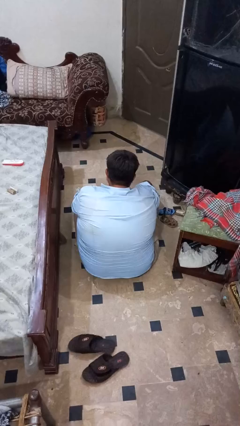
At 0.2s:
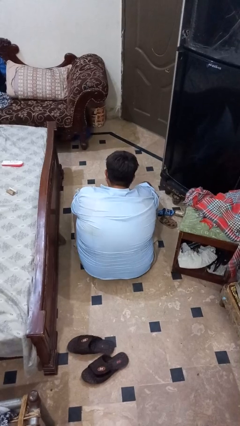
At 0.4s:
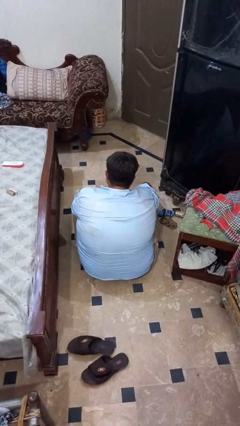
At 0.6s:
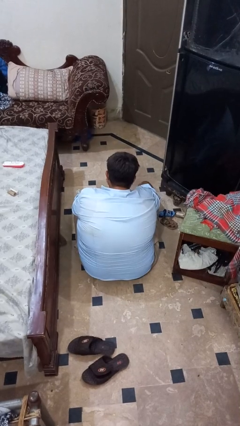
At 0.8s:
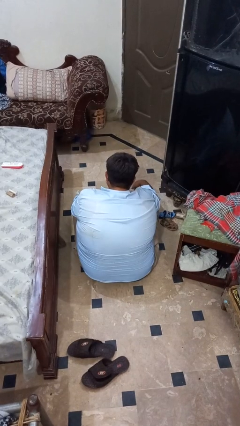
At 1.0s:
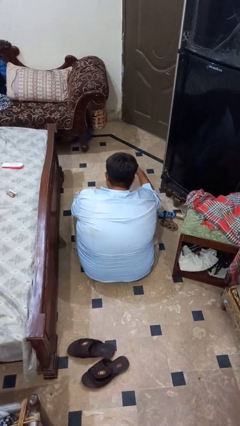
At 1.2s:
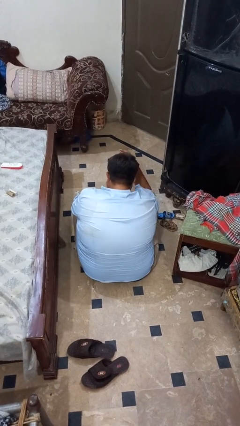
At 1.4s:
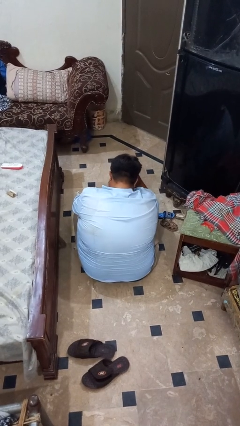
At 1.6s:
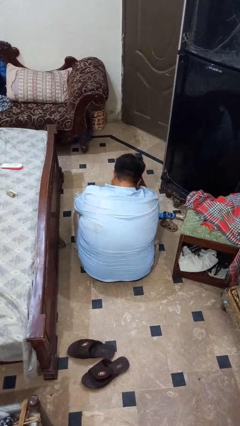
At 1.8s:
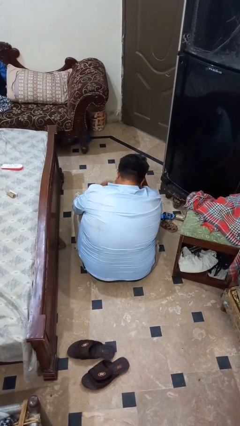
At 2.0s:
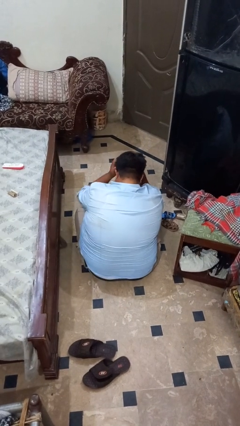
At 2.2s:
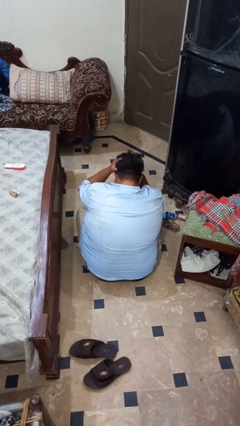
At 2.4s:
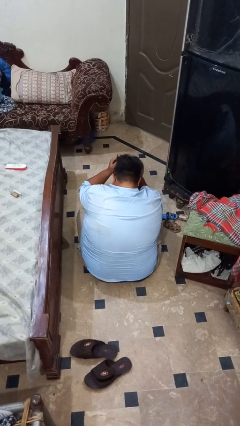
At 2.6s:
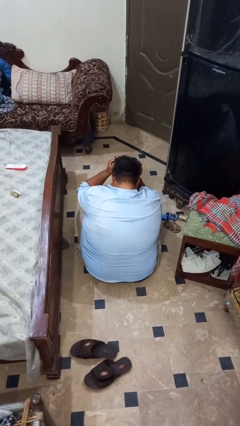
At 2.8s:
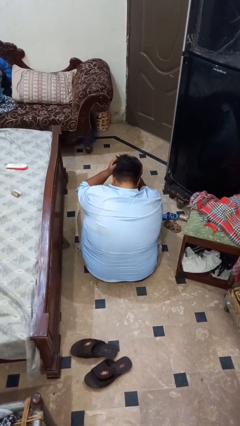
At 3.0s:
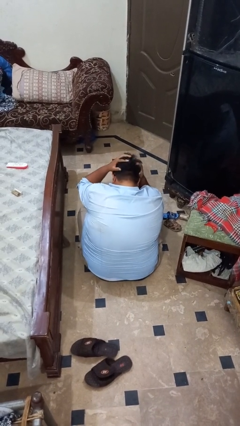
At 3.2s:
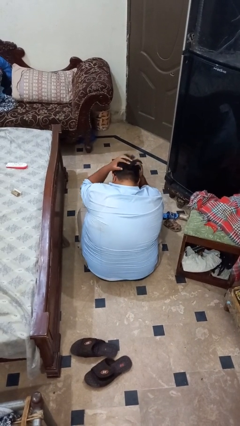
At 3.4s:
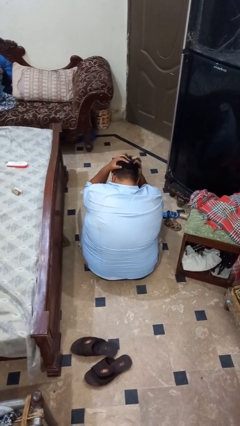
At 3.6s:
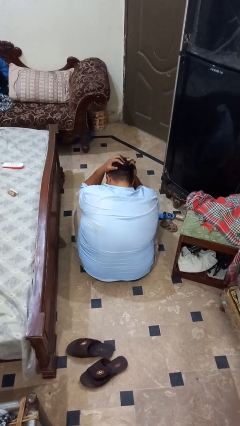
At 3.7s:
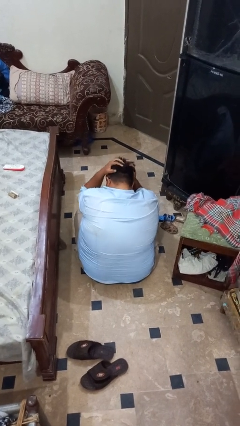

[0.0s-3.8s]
person strokes hair

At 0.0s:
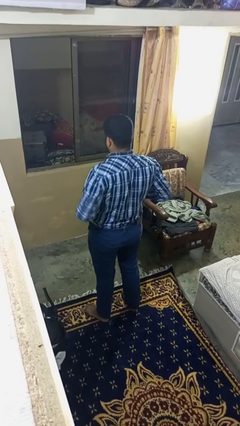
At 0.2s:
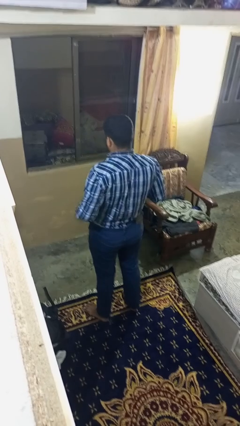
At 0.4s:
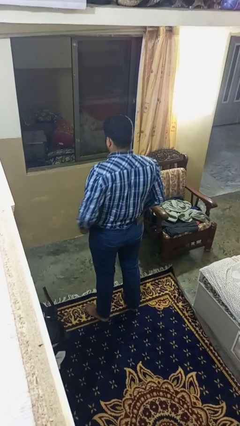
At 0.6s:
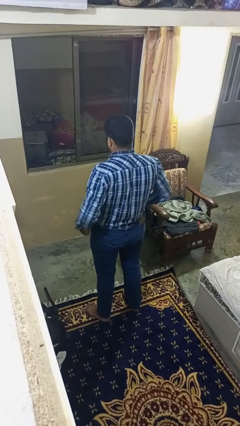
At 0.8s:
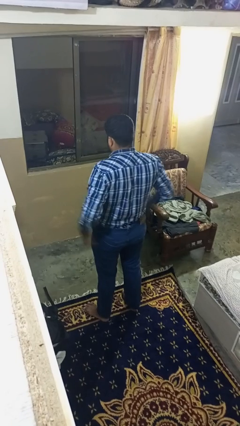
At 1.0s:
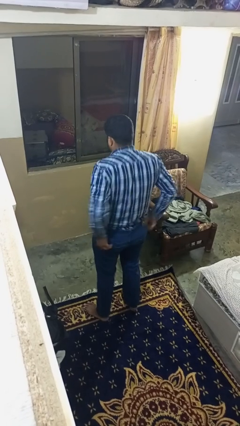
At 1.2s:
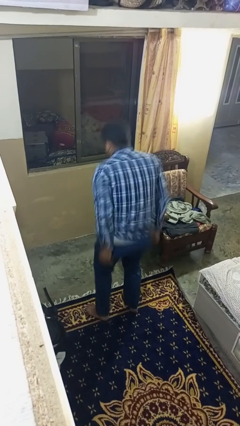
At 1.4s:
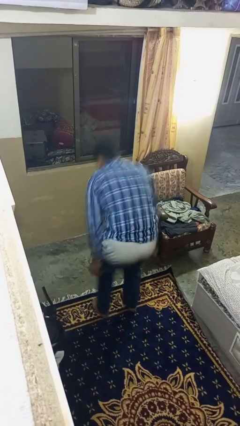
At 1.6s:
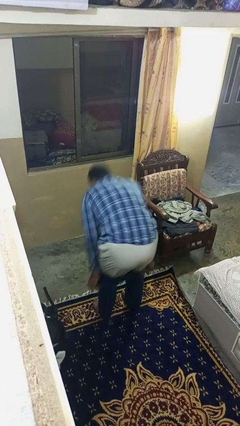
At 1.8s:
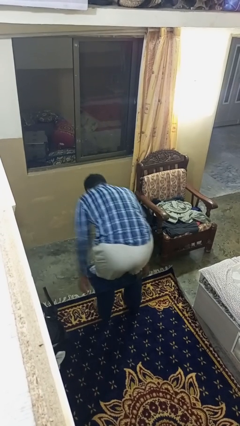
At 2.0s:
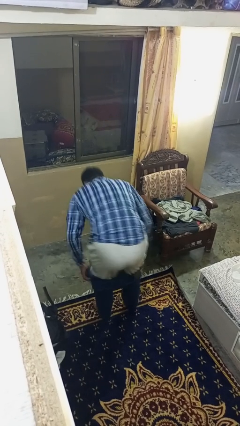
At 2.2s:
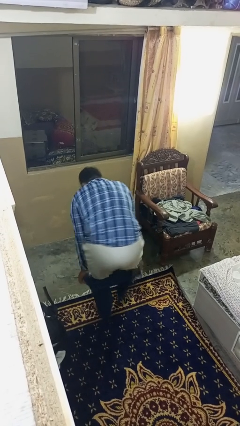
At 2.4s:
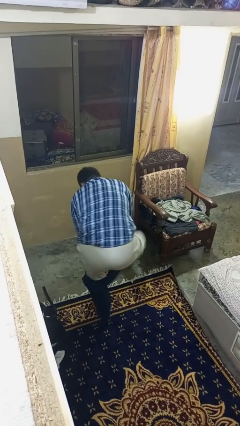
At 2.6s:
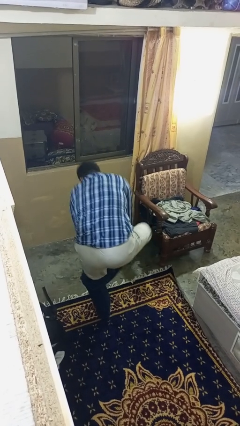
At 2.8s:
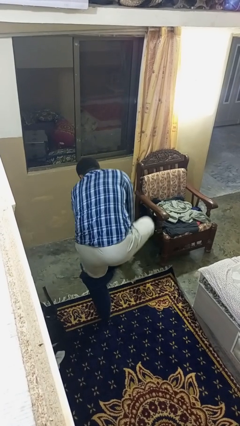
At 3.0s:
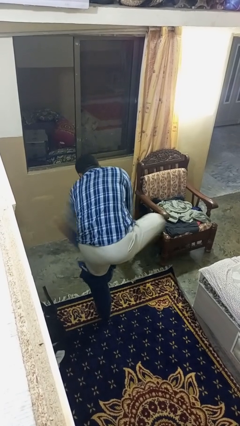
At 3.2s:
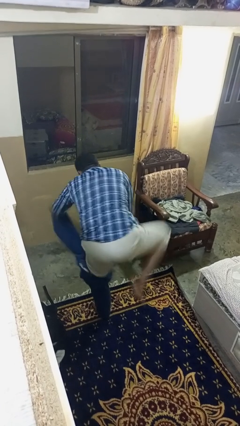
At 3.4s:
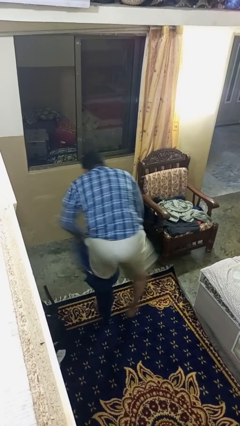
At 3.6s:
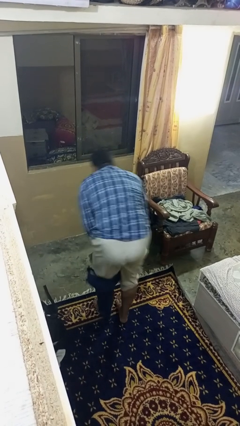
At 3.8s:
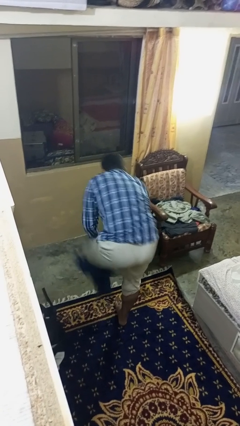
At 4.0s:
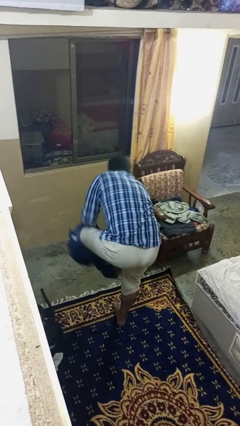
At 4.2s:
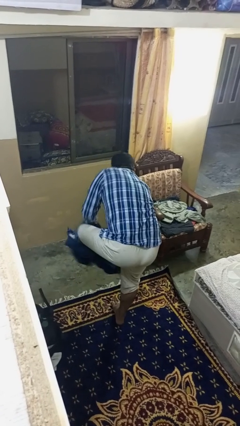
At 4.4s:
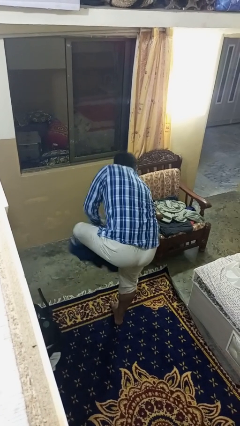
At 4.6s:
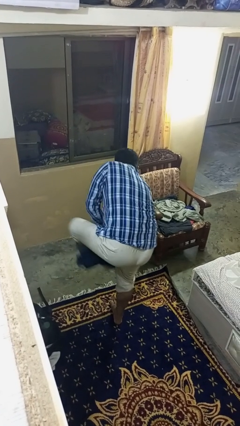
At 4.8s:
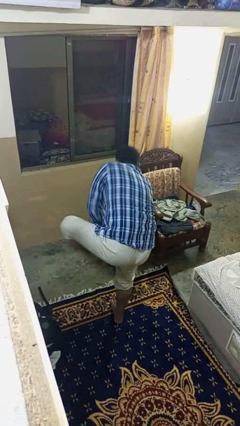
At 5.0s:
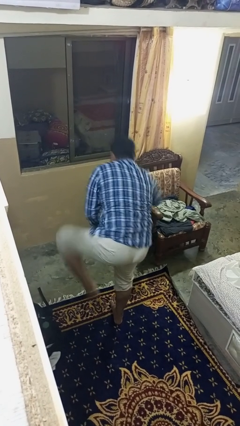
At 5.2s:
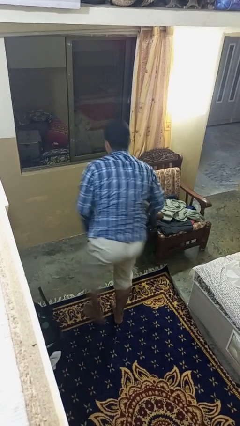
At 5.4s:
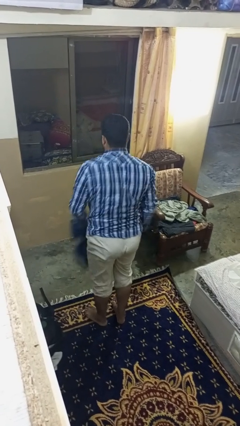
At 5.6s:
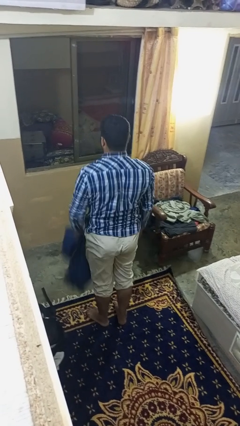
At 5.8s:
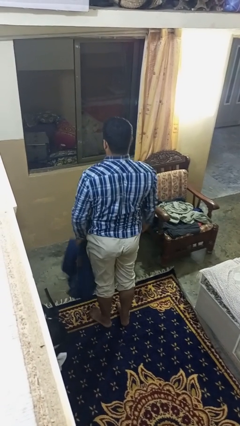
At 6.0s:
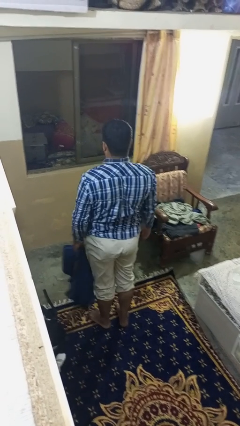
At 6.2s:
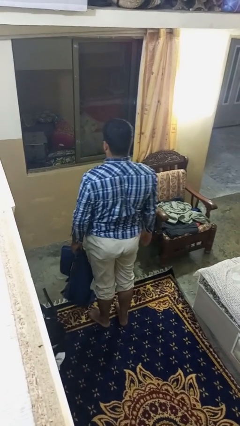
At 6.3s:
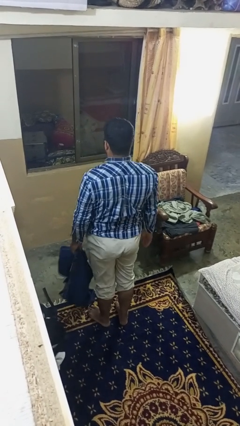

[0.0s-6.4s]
person takes off pants

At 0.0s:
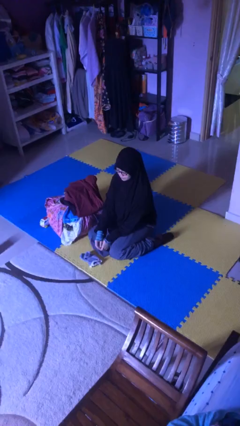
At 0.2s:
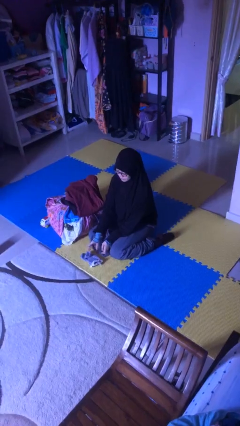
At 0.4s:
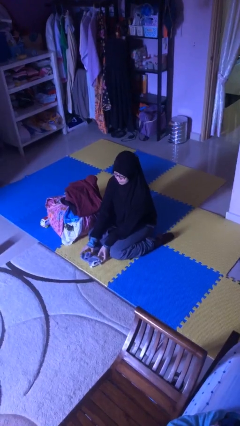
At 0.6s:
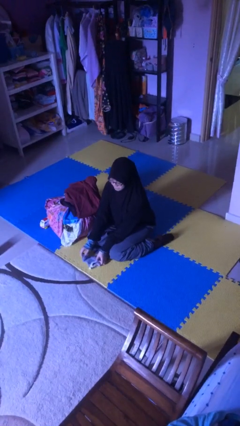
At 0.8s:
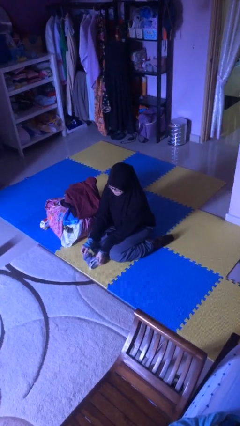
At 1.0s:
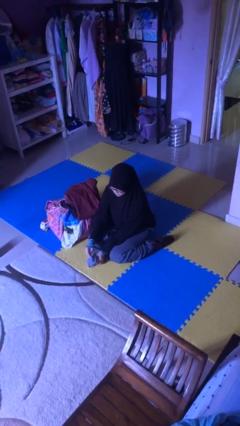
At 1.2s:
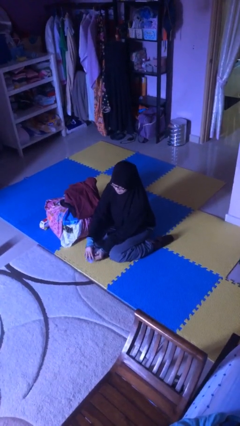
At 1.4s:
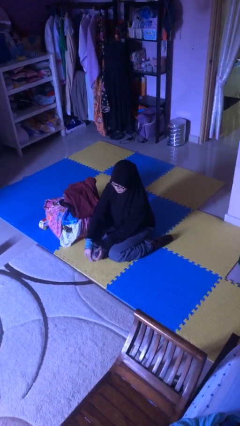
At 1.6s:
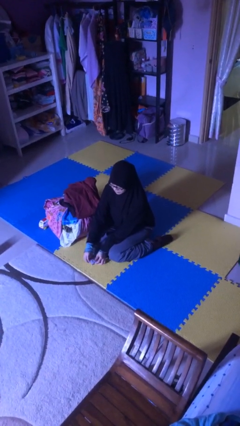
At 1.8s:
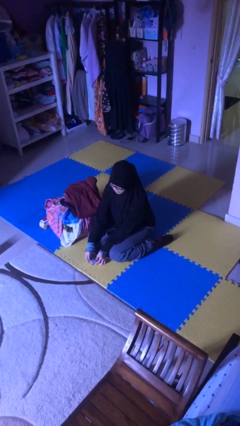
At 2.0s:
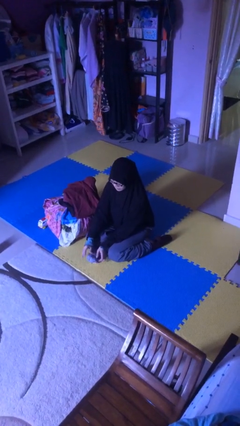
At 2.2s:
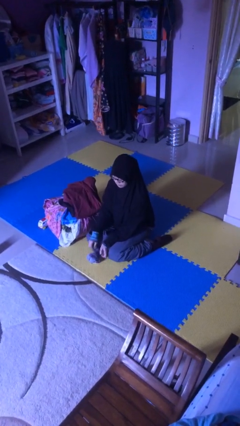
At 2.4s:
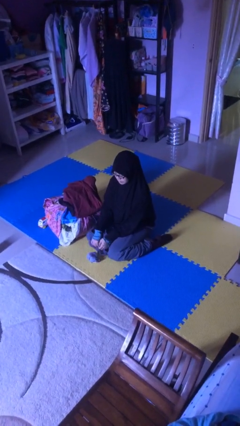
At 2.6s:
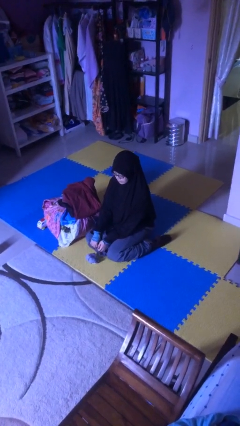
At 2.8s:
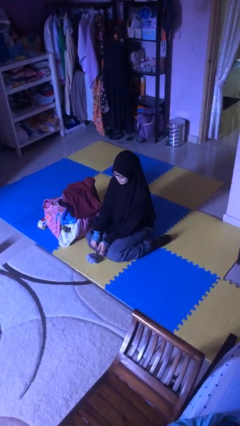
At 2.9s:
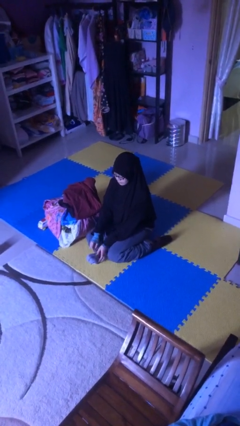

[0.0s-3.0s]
person folds socks

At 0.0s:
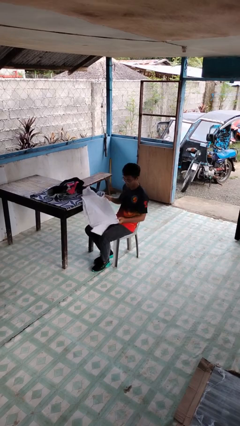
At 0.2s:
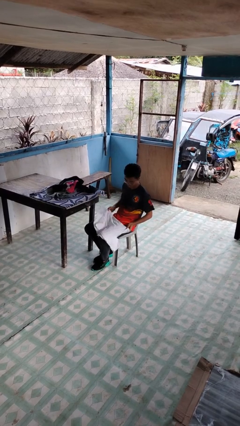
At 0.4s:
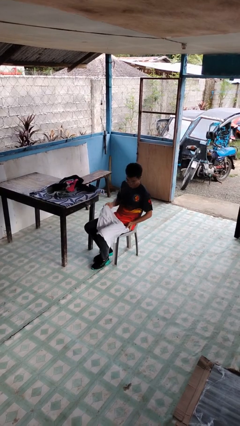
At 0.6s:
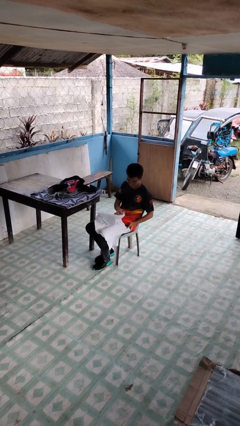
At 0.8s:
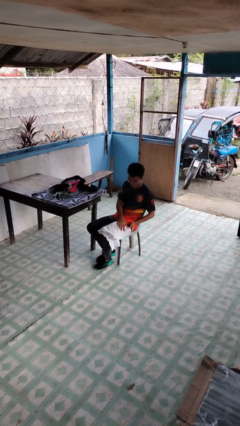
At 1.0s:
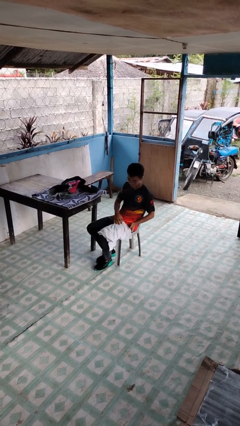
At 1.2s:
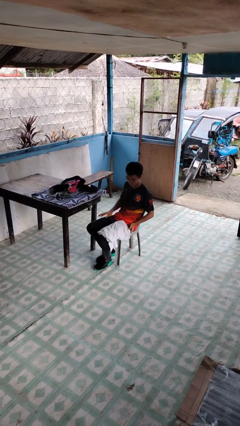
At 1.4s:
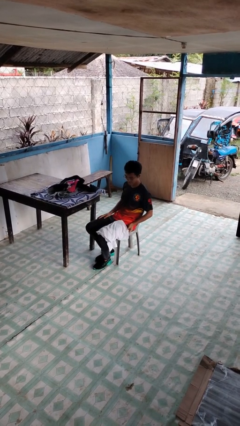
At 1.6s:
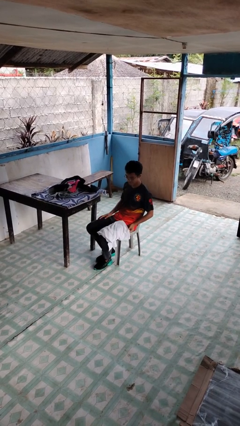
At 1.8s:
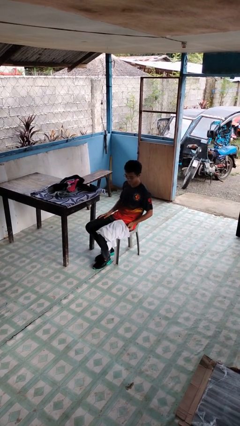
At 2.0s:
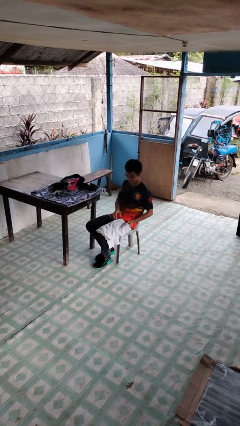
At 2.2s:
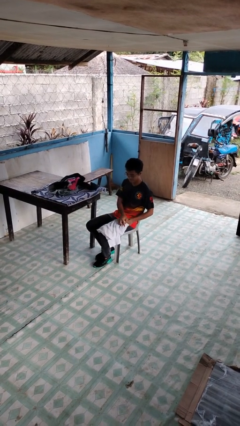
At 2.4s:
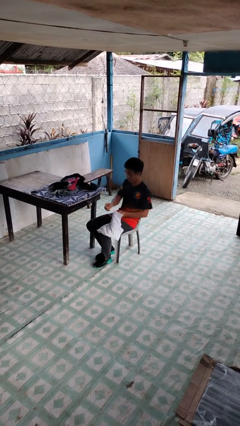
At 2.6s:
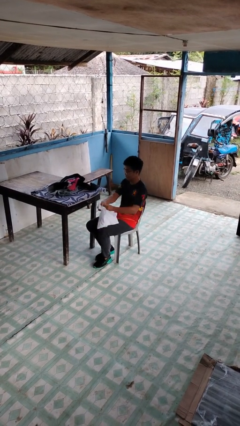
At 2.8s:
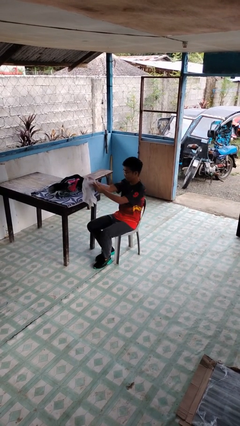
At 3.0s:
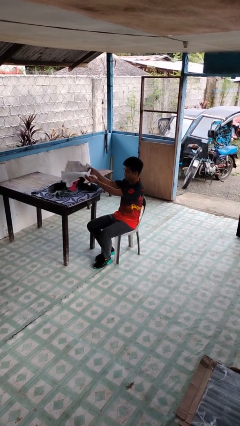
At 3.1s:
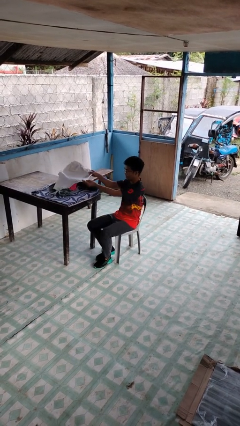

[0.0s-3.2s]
person folds shirt

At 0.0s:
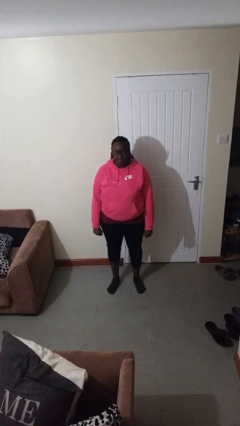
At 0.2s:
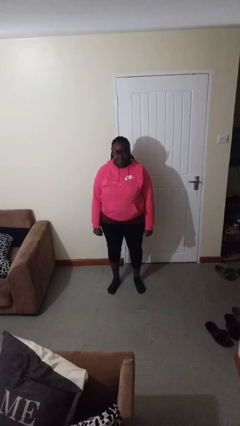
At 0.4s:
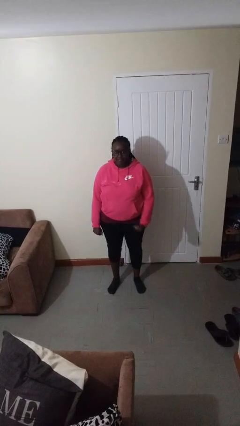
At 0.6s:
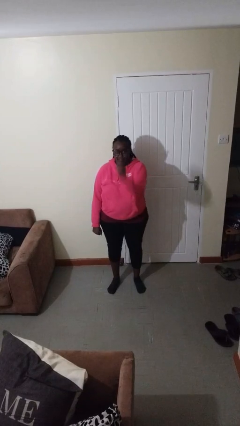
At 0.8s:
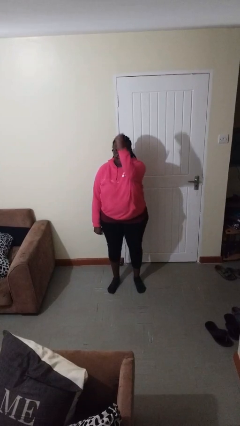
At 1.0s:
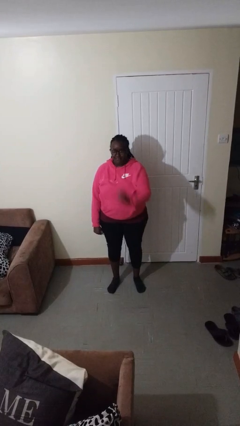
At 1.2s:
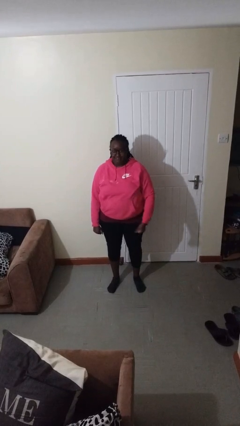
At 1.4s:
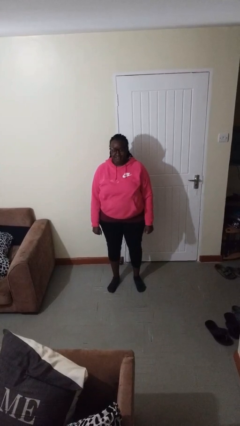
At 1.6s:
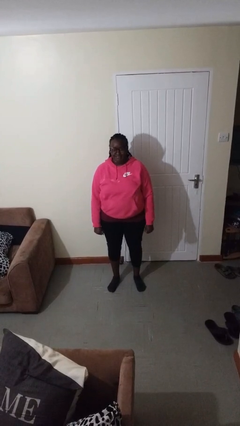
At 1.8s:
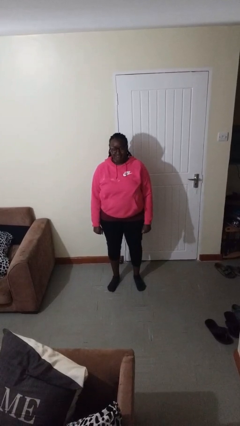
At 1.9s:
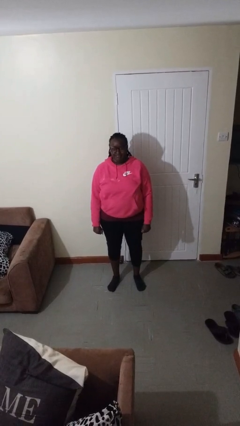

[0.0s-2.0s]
person punches
